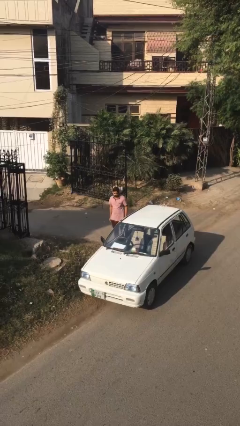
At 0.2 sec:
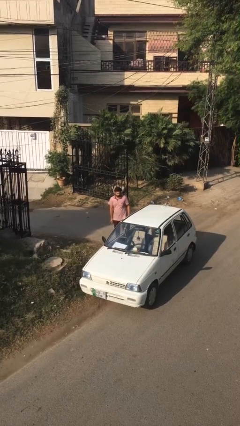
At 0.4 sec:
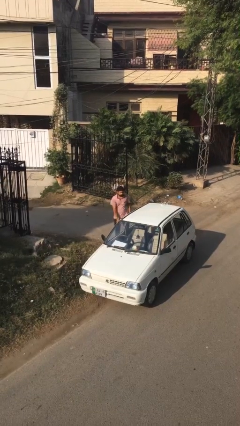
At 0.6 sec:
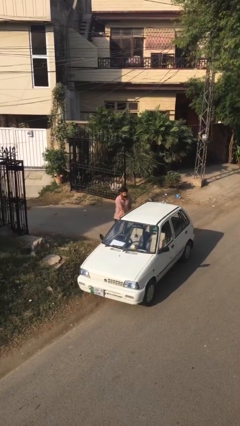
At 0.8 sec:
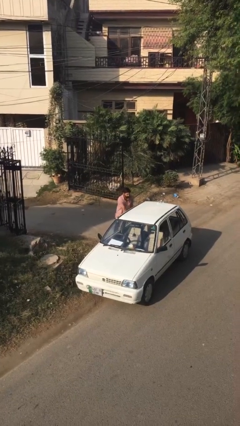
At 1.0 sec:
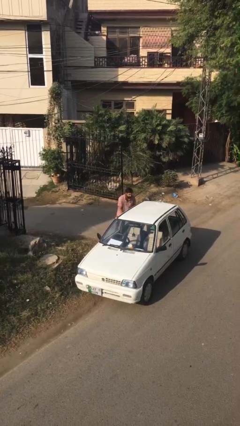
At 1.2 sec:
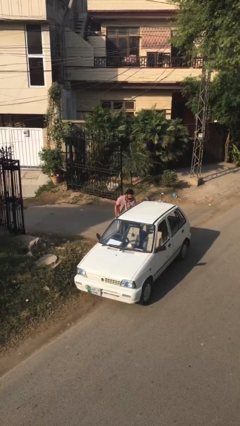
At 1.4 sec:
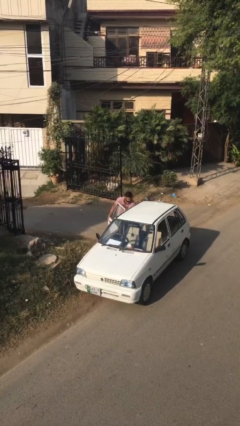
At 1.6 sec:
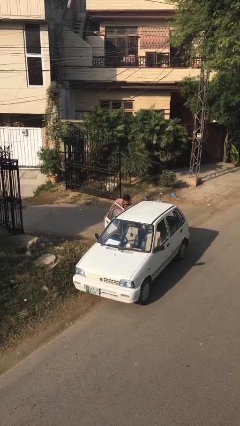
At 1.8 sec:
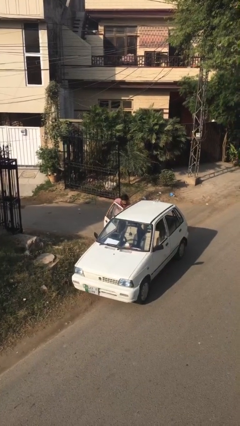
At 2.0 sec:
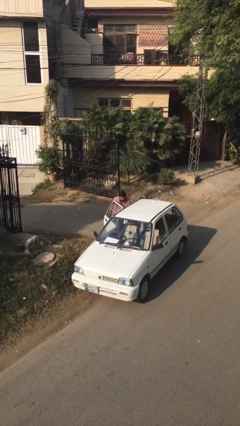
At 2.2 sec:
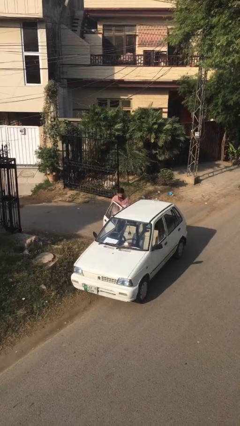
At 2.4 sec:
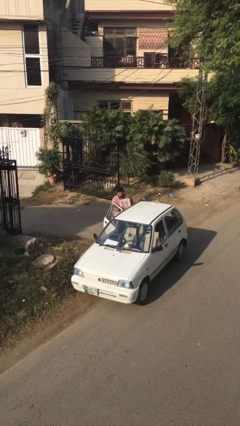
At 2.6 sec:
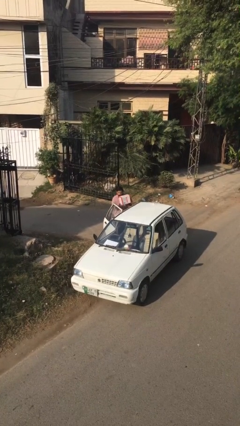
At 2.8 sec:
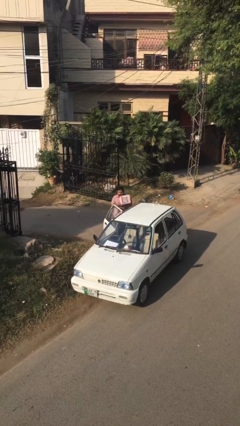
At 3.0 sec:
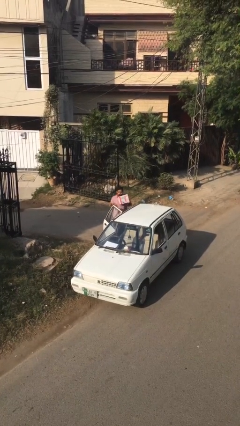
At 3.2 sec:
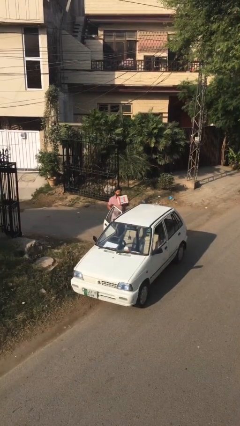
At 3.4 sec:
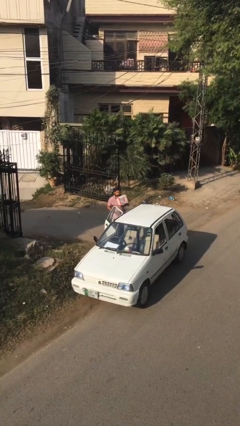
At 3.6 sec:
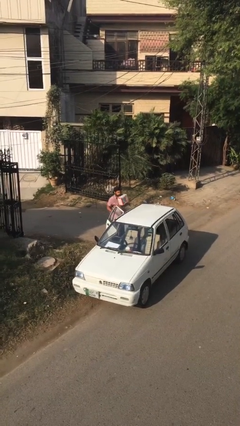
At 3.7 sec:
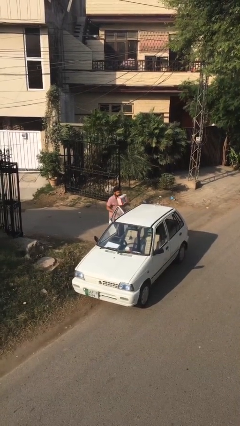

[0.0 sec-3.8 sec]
person unloads car

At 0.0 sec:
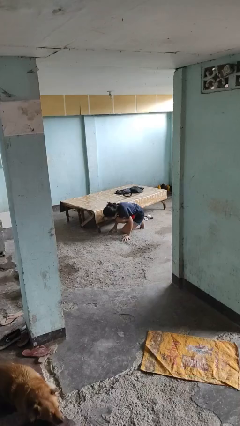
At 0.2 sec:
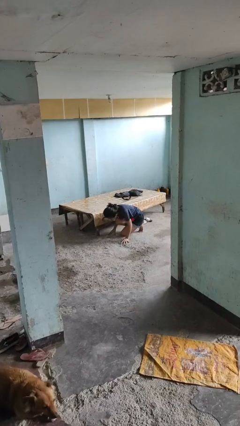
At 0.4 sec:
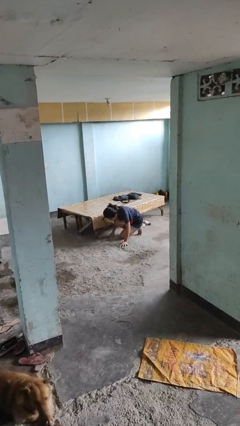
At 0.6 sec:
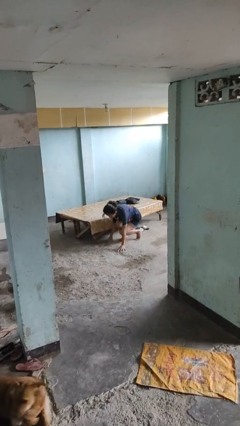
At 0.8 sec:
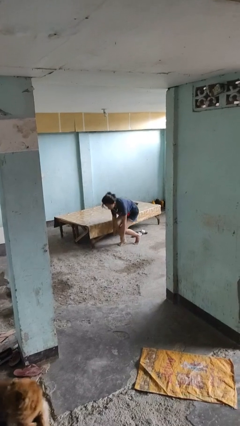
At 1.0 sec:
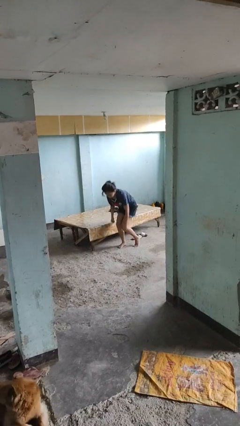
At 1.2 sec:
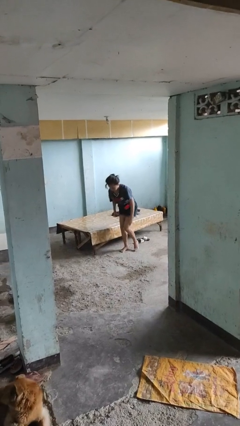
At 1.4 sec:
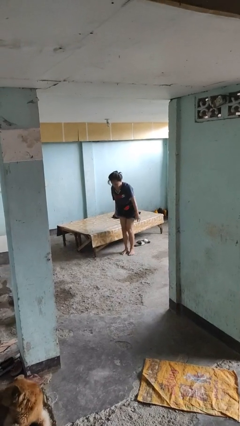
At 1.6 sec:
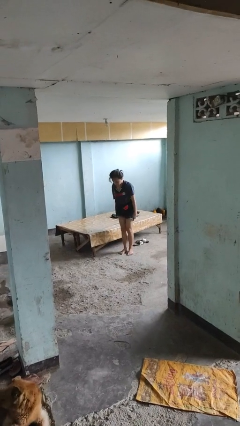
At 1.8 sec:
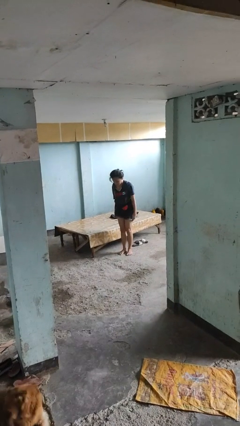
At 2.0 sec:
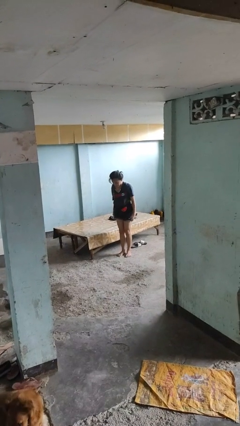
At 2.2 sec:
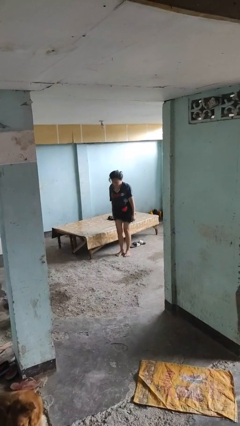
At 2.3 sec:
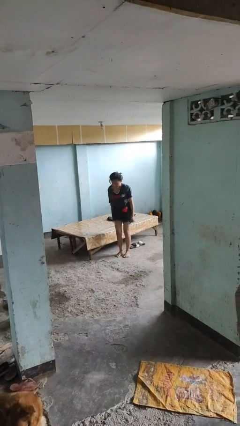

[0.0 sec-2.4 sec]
person stands up from floor

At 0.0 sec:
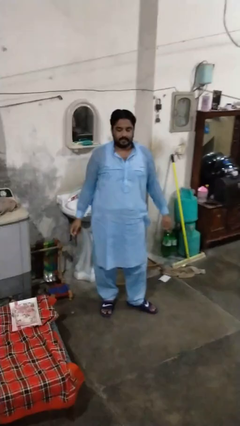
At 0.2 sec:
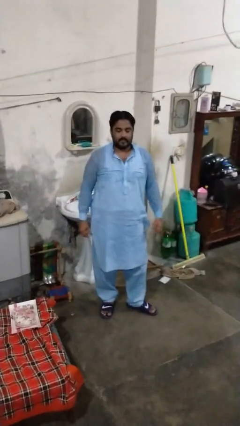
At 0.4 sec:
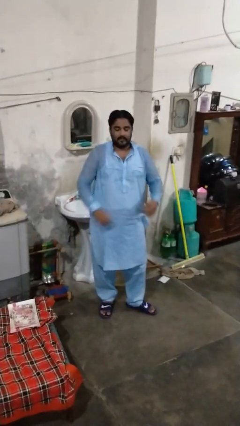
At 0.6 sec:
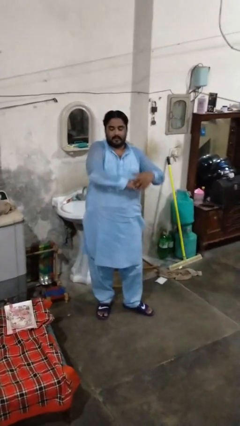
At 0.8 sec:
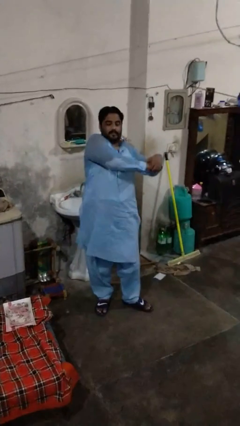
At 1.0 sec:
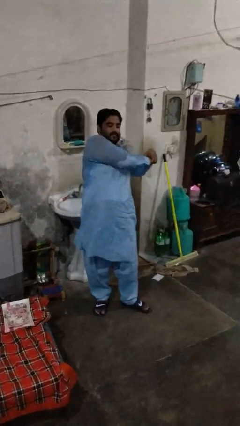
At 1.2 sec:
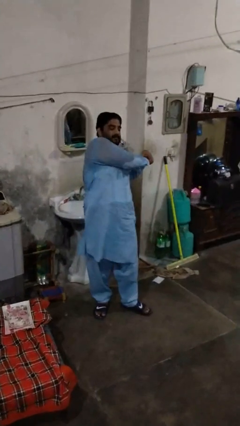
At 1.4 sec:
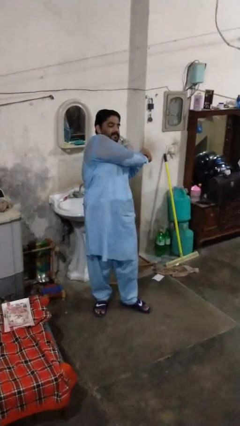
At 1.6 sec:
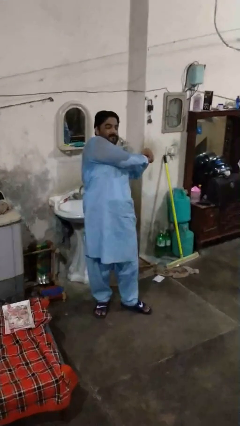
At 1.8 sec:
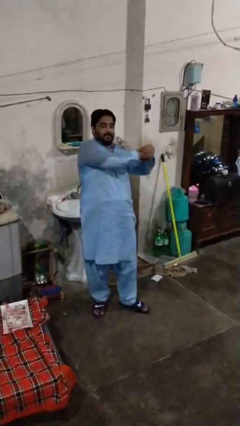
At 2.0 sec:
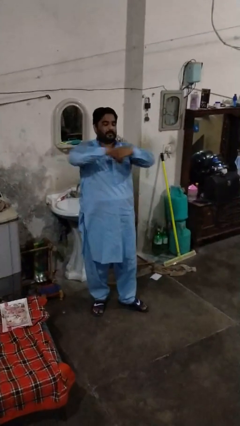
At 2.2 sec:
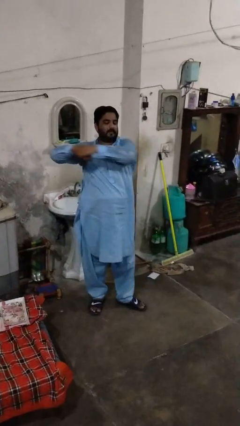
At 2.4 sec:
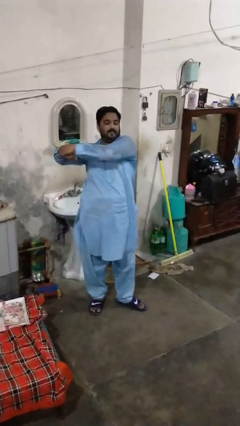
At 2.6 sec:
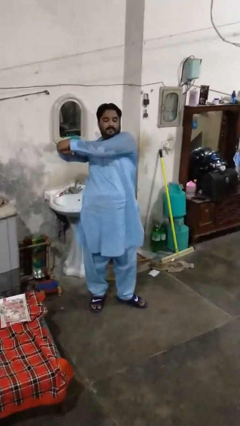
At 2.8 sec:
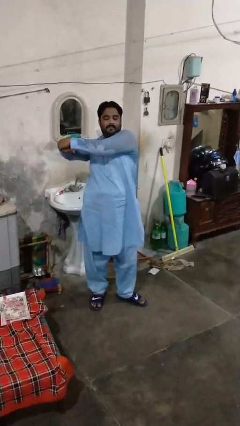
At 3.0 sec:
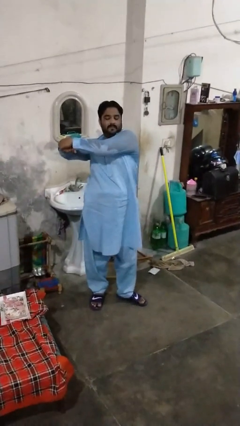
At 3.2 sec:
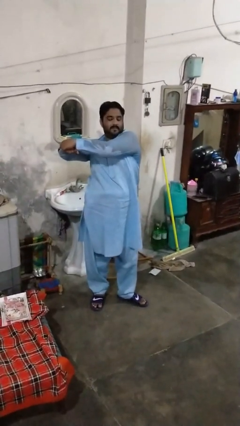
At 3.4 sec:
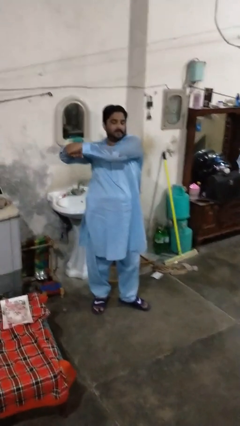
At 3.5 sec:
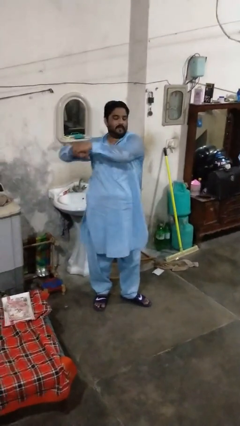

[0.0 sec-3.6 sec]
person stretches arms to side

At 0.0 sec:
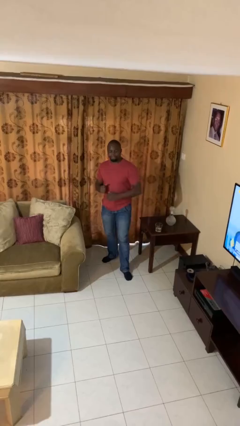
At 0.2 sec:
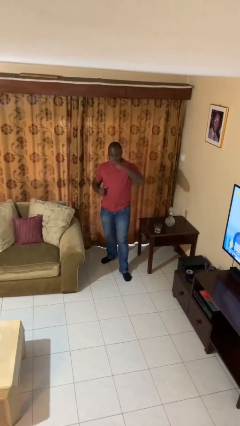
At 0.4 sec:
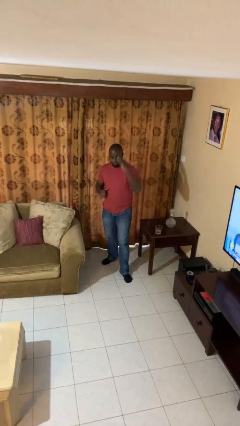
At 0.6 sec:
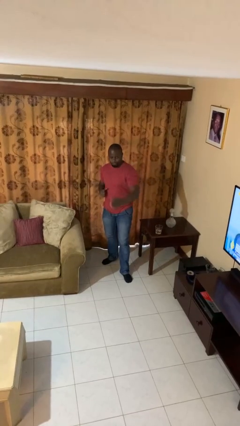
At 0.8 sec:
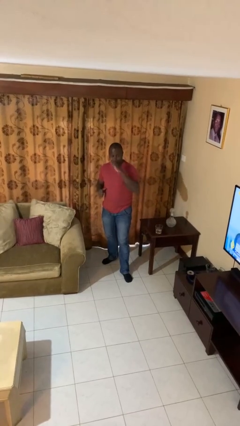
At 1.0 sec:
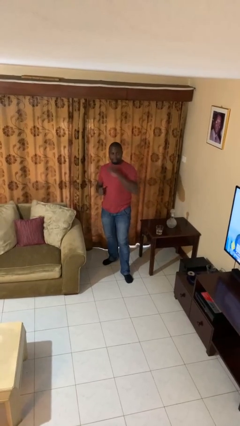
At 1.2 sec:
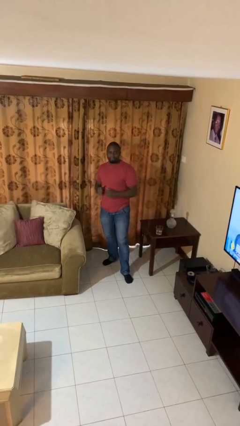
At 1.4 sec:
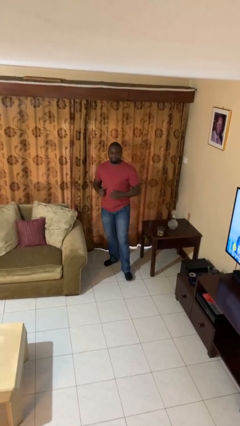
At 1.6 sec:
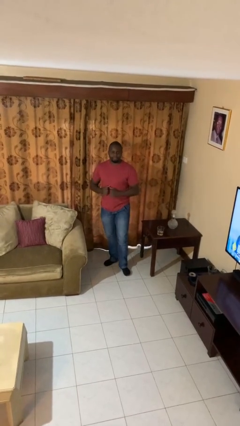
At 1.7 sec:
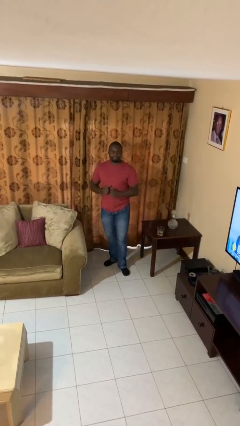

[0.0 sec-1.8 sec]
person karate chop

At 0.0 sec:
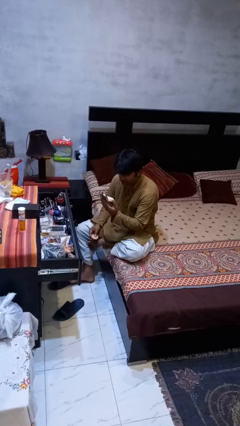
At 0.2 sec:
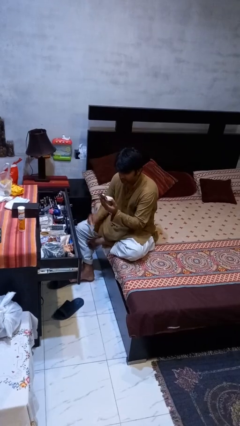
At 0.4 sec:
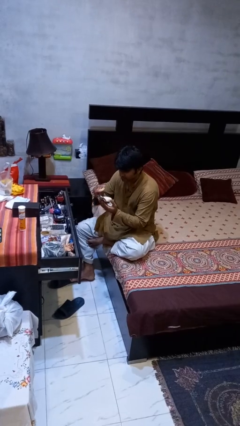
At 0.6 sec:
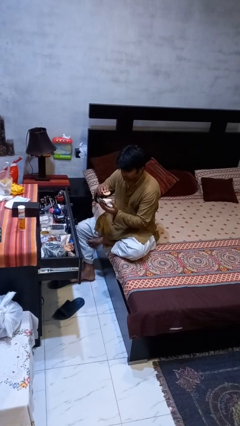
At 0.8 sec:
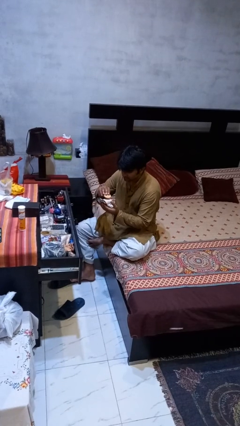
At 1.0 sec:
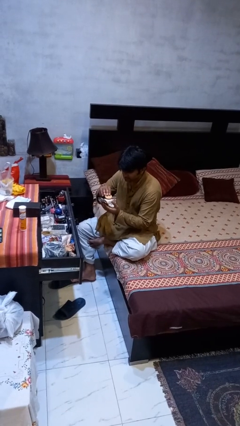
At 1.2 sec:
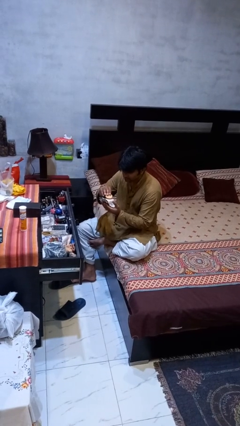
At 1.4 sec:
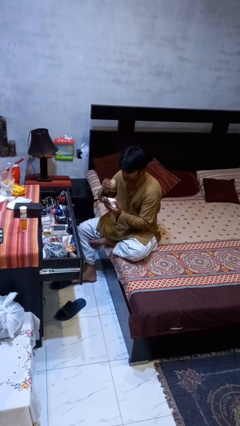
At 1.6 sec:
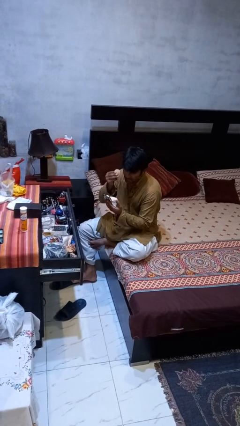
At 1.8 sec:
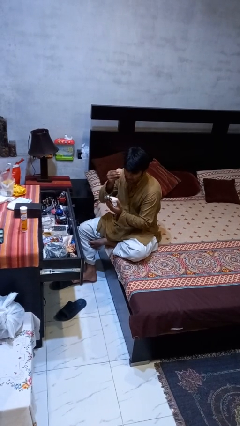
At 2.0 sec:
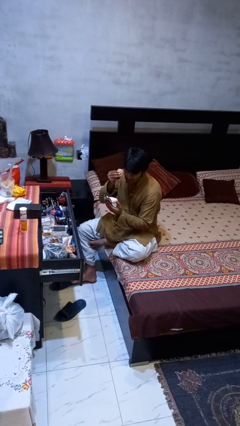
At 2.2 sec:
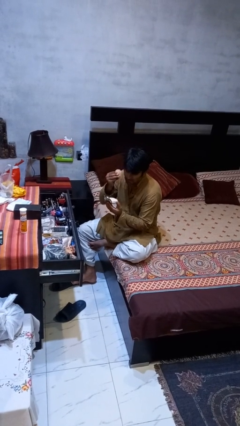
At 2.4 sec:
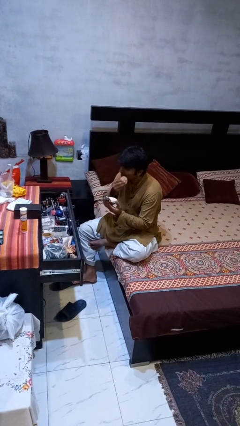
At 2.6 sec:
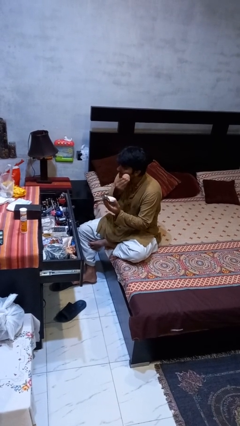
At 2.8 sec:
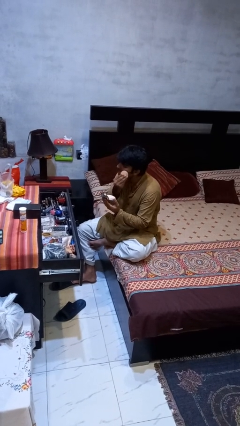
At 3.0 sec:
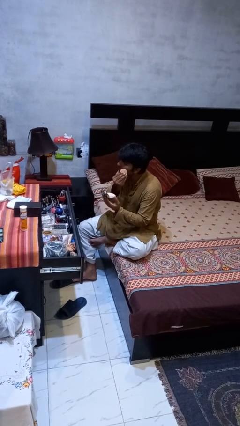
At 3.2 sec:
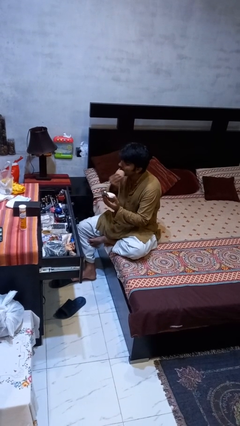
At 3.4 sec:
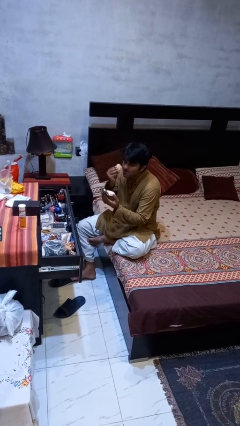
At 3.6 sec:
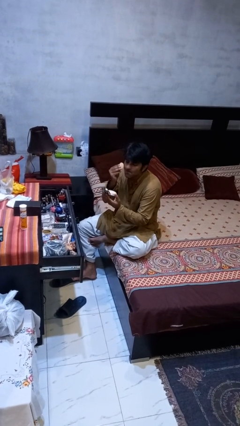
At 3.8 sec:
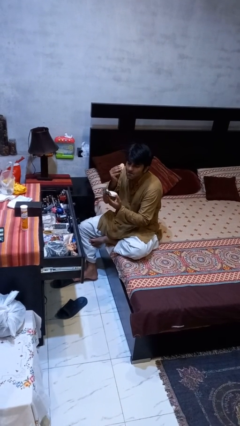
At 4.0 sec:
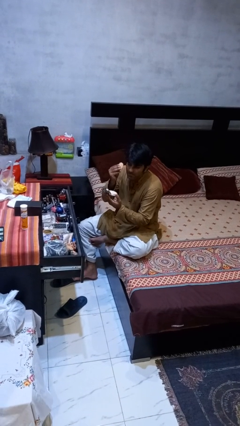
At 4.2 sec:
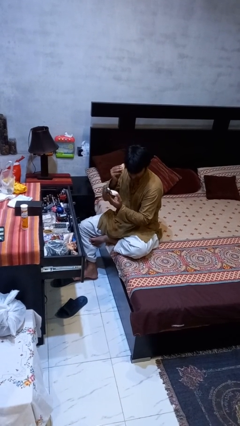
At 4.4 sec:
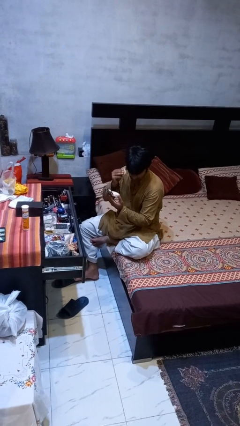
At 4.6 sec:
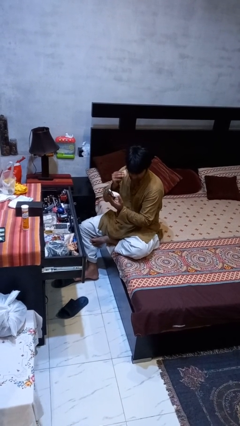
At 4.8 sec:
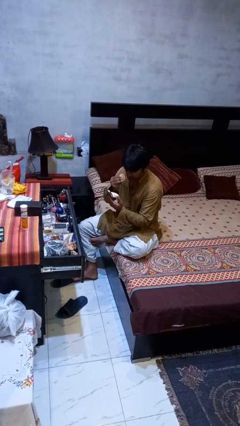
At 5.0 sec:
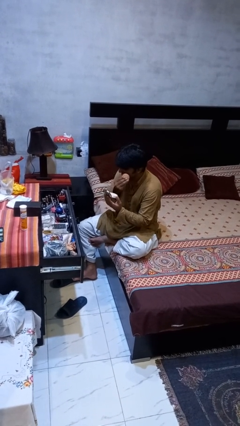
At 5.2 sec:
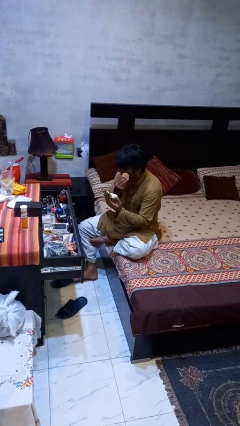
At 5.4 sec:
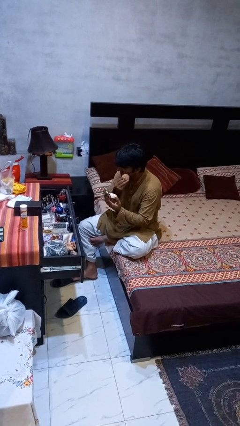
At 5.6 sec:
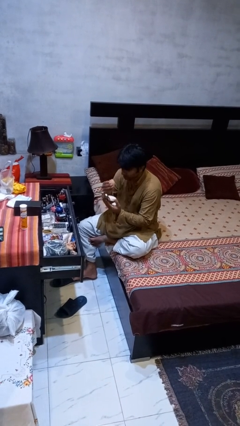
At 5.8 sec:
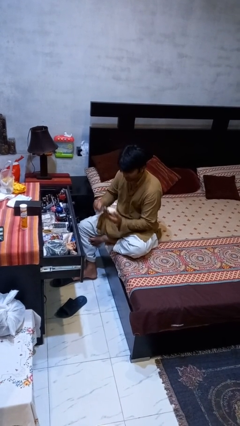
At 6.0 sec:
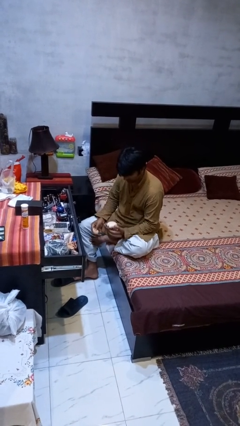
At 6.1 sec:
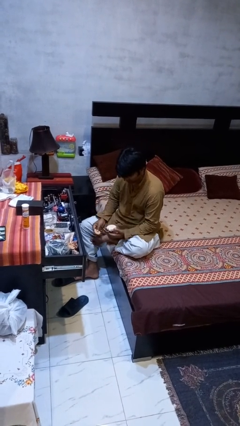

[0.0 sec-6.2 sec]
person applies foundation makeup
